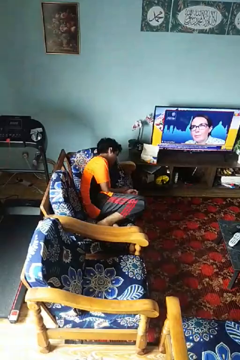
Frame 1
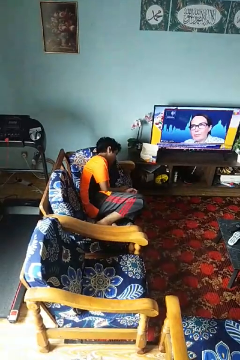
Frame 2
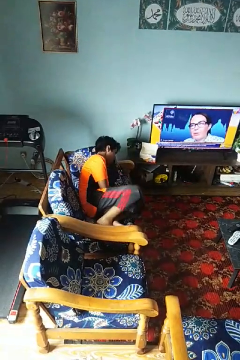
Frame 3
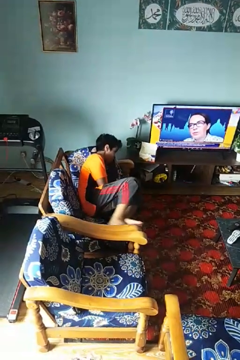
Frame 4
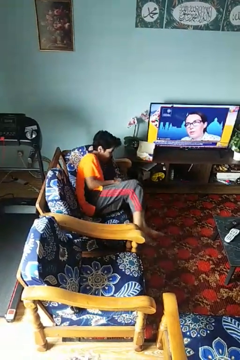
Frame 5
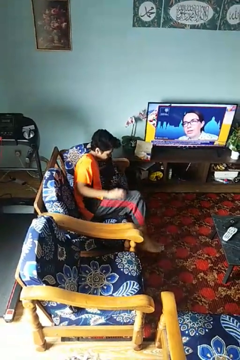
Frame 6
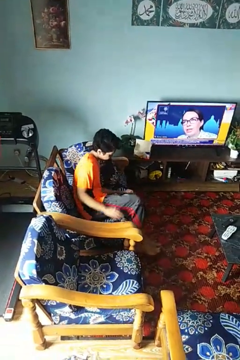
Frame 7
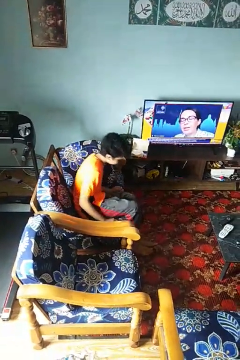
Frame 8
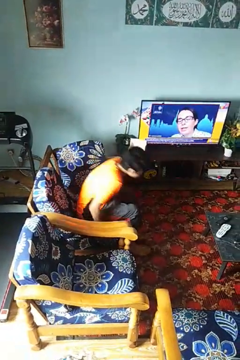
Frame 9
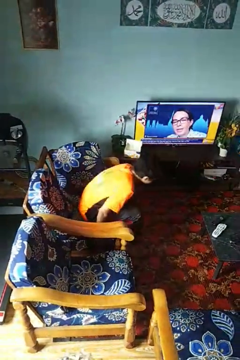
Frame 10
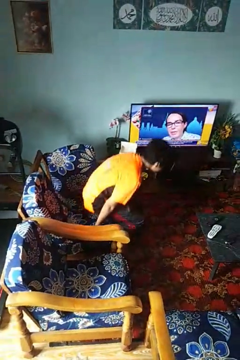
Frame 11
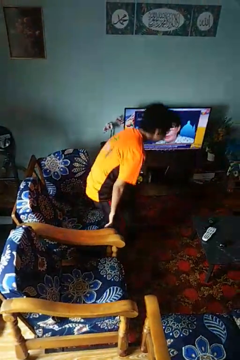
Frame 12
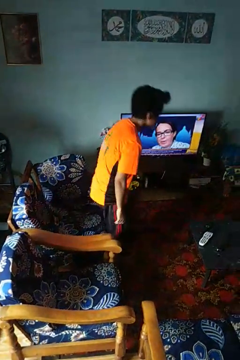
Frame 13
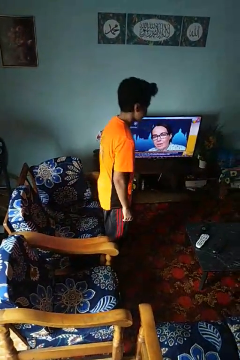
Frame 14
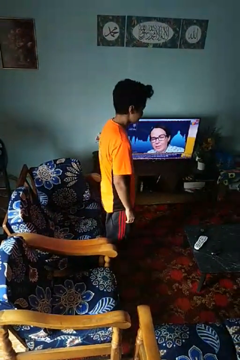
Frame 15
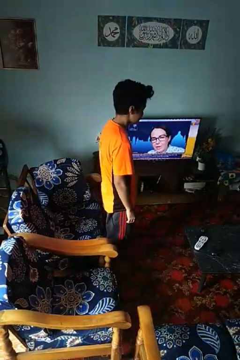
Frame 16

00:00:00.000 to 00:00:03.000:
person stands up

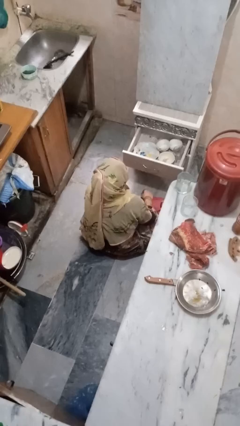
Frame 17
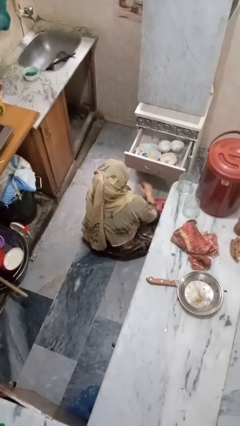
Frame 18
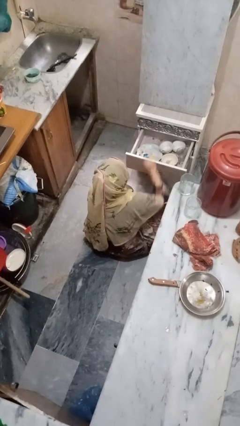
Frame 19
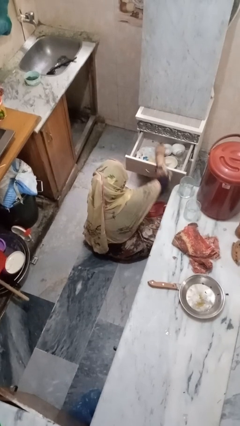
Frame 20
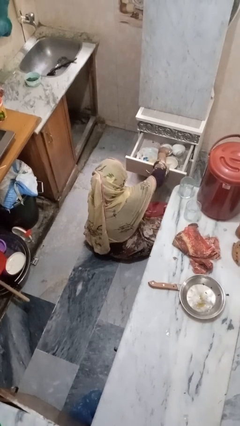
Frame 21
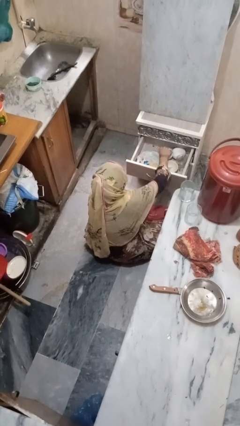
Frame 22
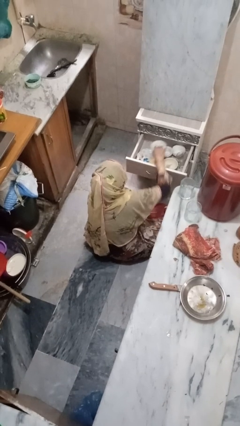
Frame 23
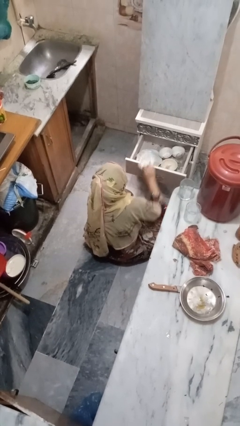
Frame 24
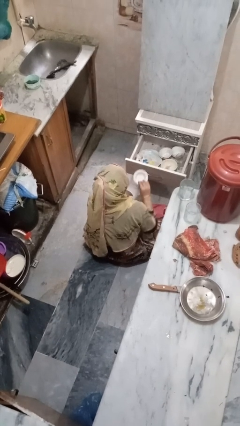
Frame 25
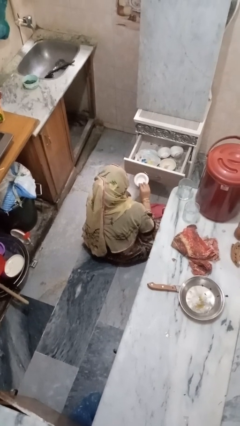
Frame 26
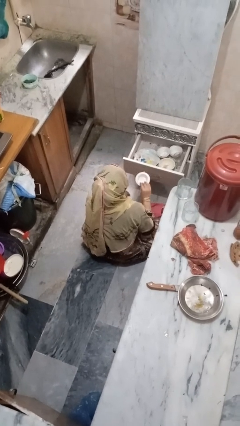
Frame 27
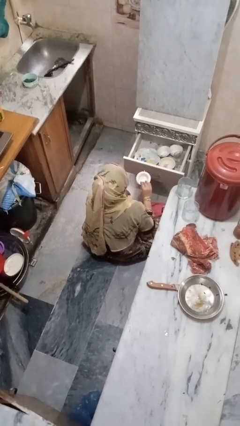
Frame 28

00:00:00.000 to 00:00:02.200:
person takes object from kitchen drawer

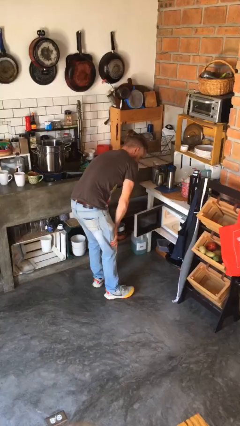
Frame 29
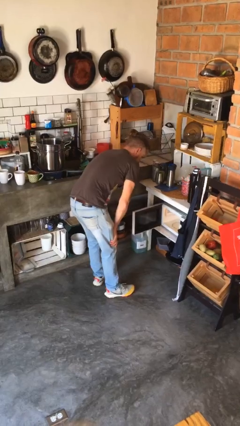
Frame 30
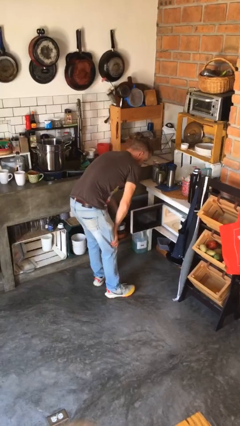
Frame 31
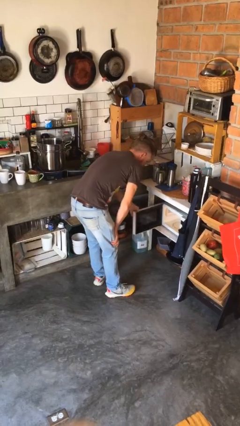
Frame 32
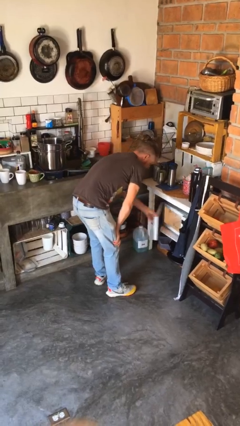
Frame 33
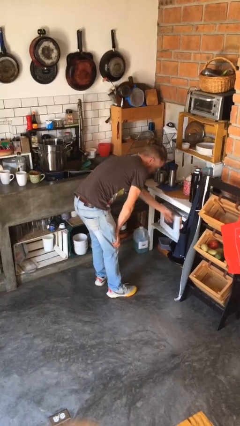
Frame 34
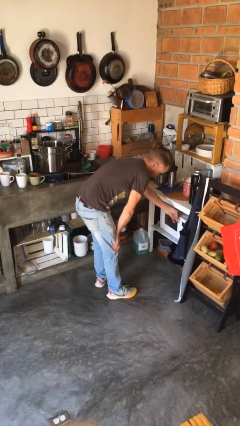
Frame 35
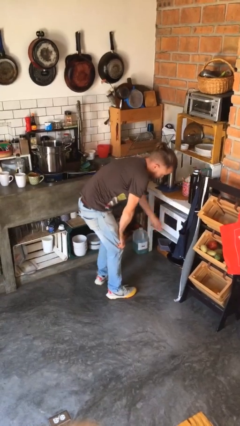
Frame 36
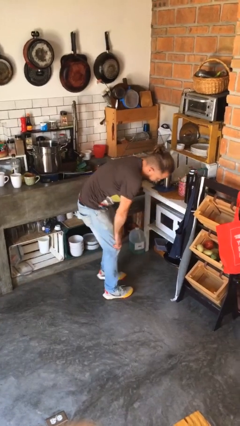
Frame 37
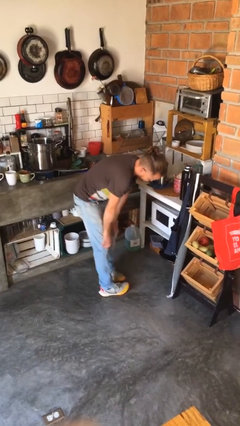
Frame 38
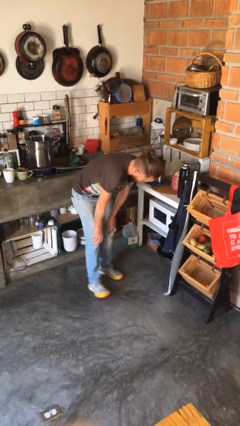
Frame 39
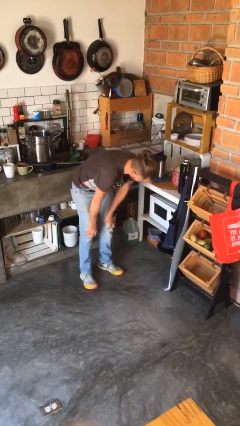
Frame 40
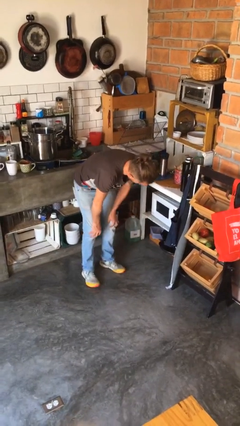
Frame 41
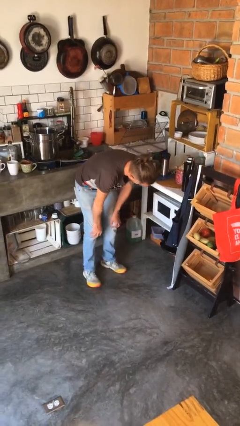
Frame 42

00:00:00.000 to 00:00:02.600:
person closes microwave

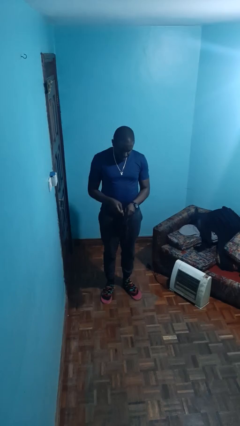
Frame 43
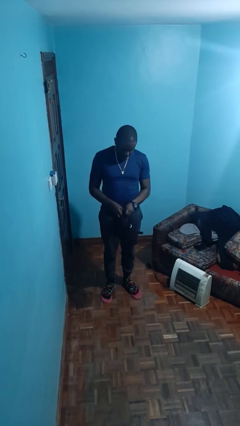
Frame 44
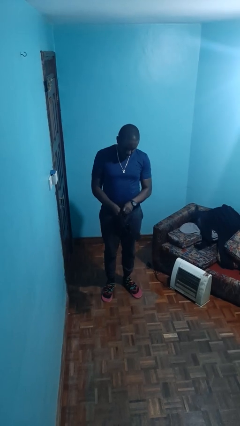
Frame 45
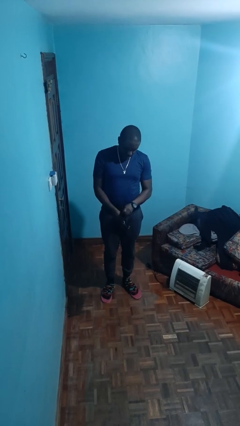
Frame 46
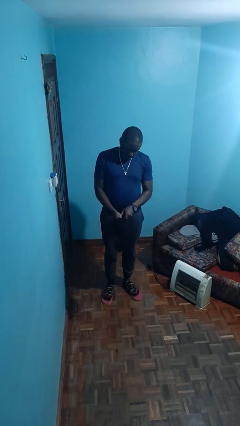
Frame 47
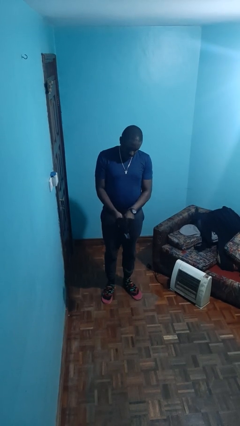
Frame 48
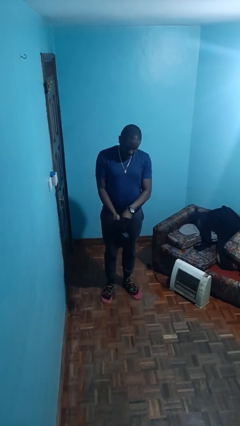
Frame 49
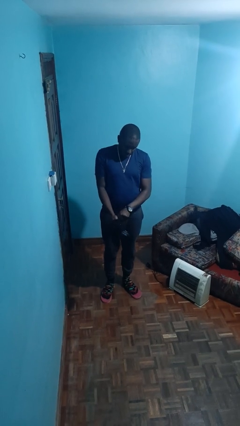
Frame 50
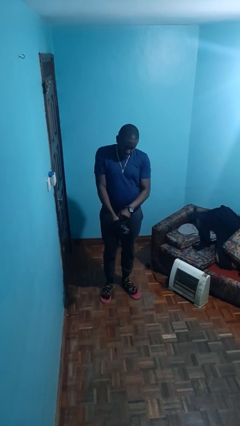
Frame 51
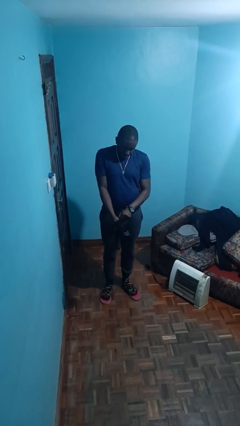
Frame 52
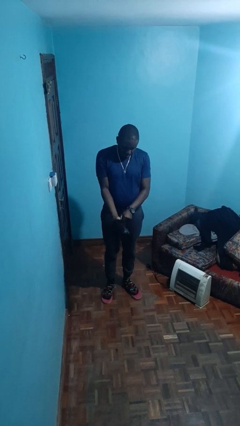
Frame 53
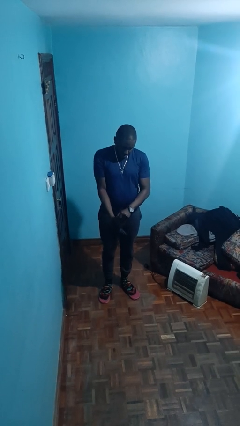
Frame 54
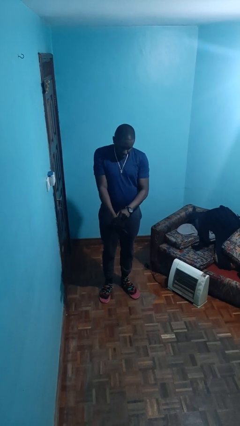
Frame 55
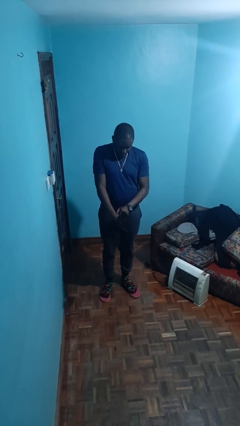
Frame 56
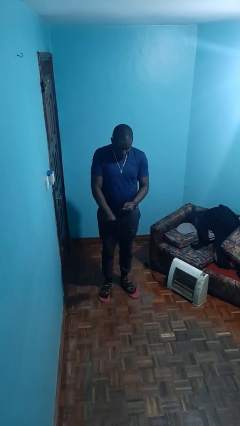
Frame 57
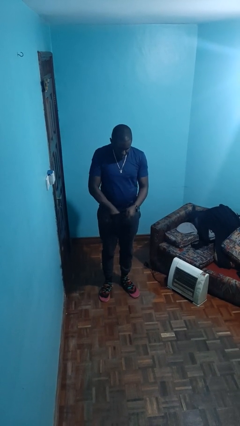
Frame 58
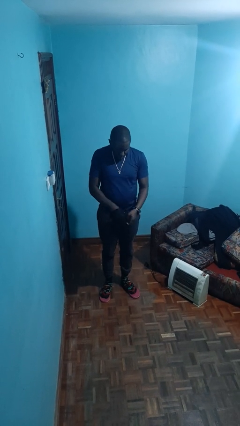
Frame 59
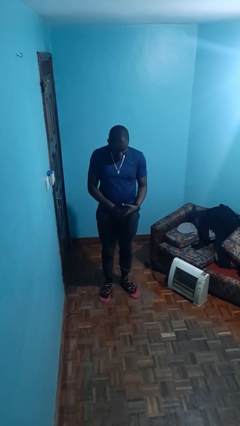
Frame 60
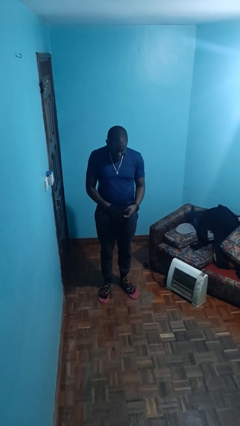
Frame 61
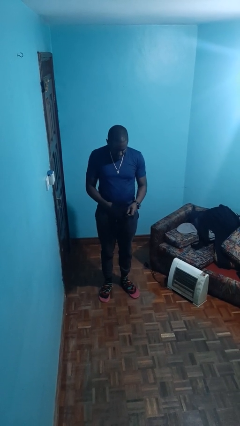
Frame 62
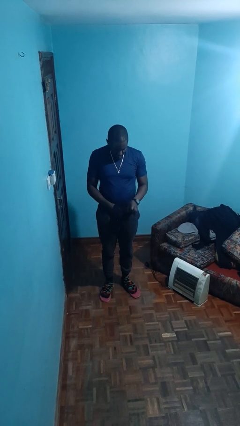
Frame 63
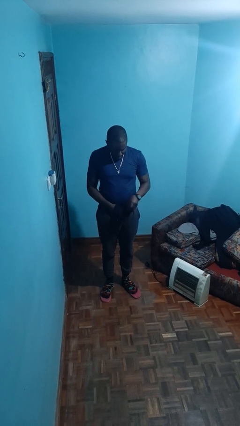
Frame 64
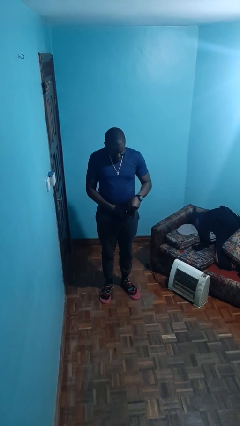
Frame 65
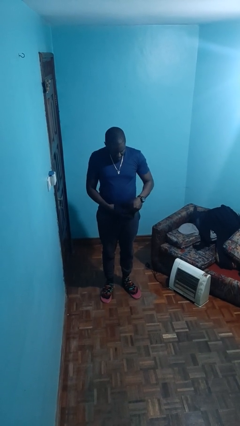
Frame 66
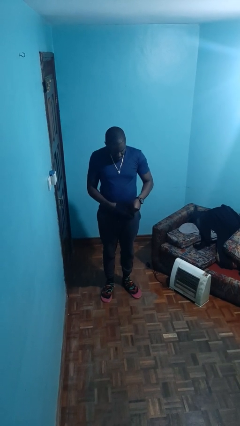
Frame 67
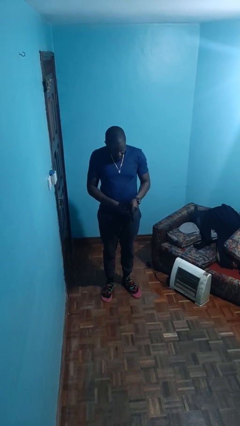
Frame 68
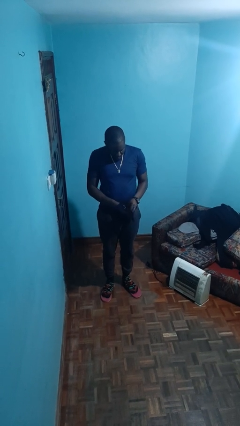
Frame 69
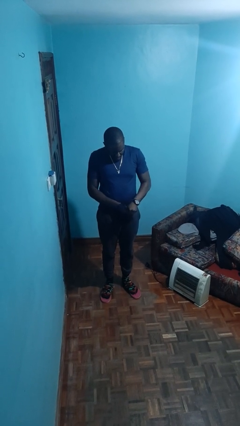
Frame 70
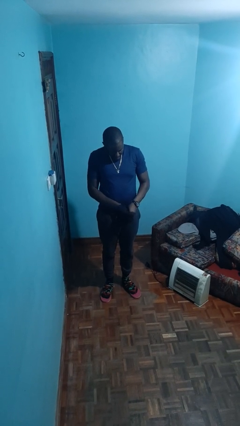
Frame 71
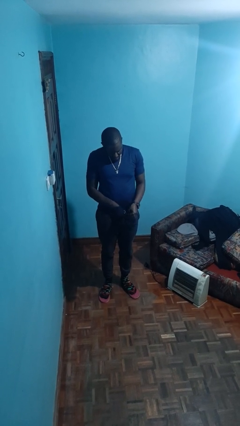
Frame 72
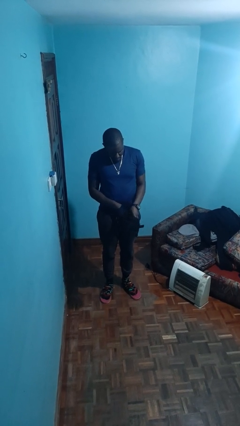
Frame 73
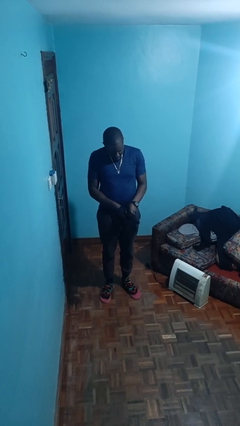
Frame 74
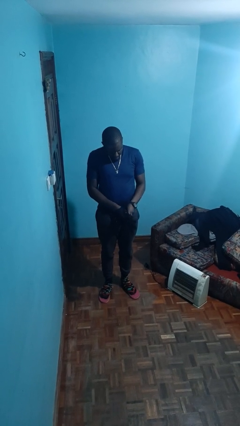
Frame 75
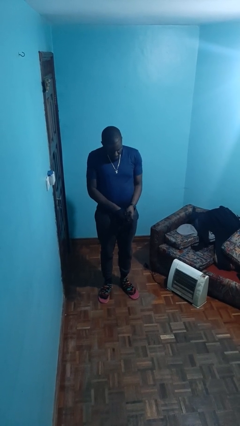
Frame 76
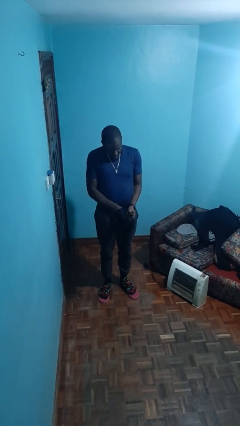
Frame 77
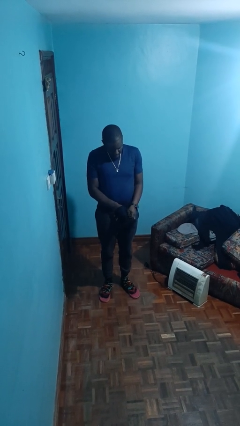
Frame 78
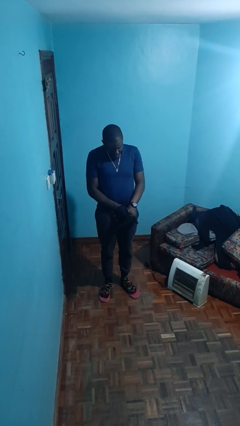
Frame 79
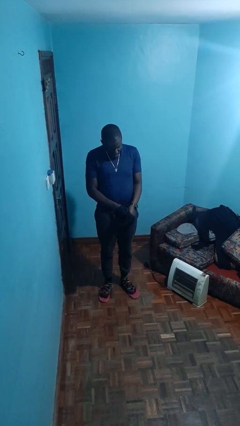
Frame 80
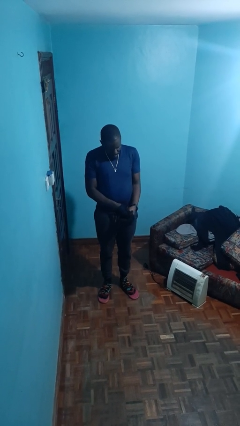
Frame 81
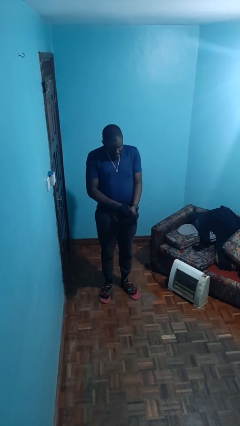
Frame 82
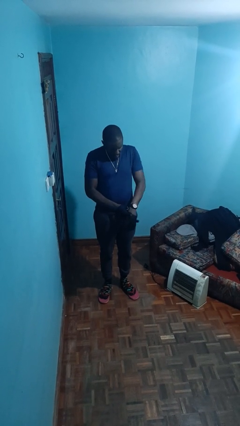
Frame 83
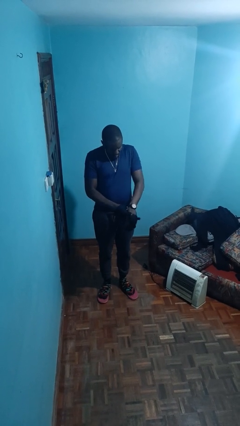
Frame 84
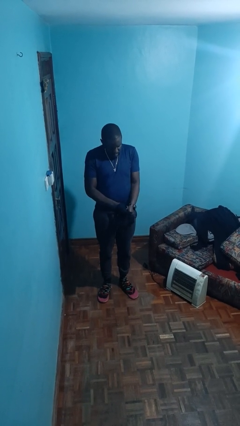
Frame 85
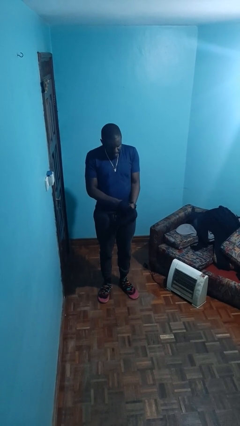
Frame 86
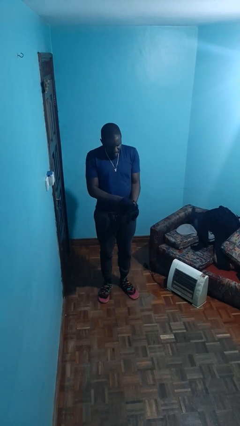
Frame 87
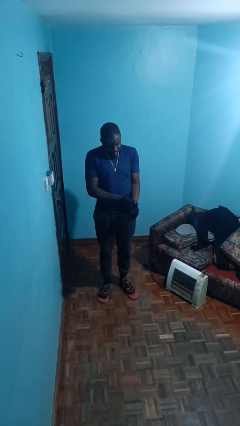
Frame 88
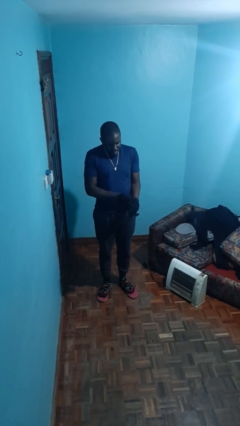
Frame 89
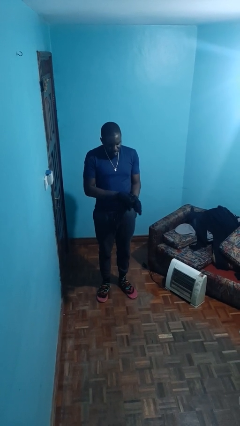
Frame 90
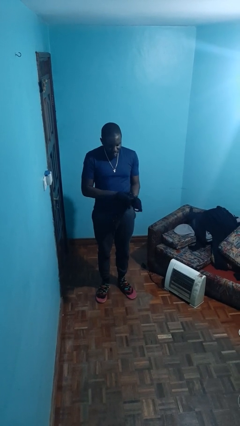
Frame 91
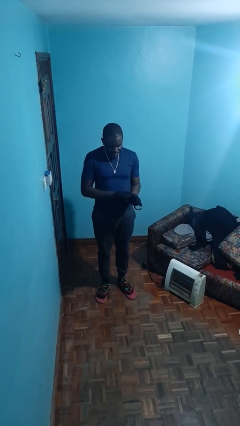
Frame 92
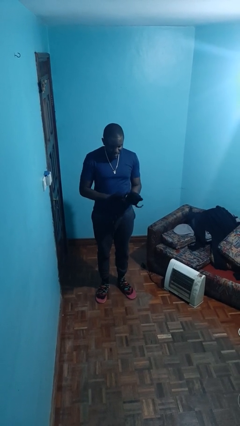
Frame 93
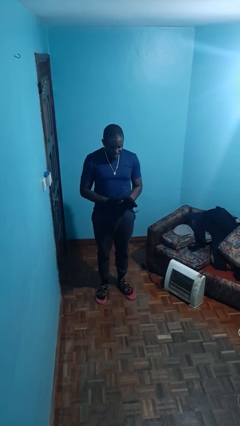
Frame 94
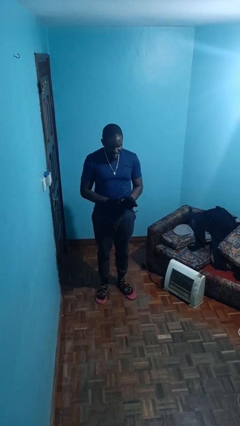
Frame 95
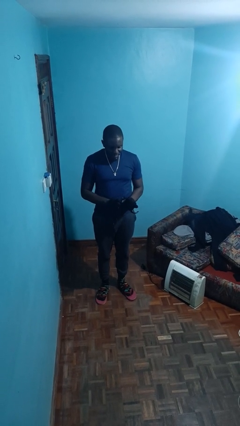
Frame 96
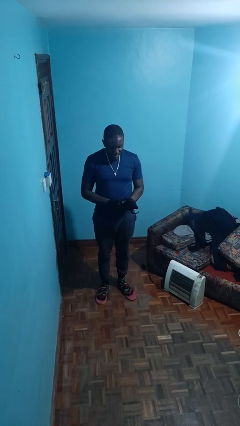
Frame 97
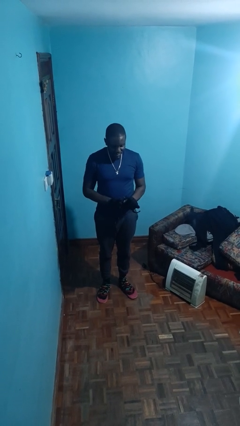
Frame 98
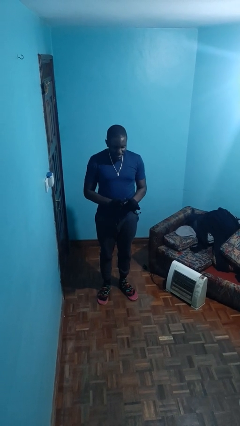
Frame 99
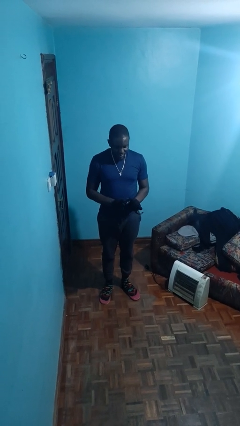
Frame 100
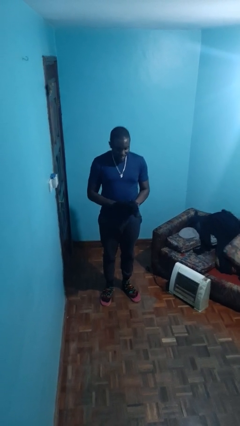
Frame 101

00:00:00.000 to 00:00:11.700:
person puts on gloves
